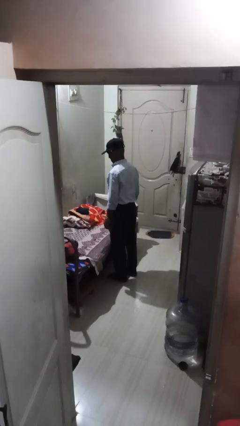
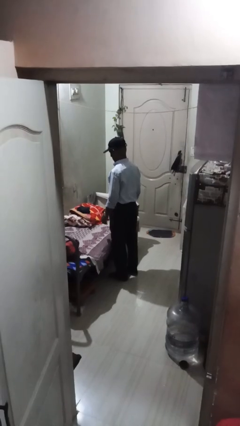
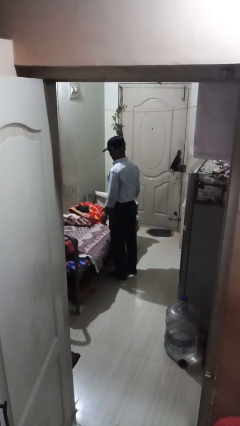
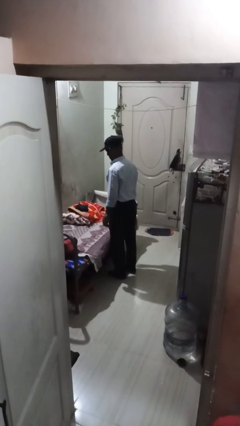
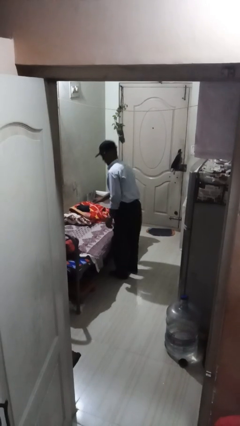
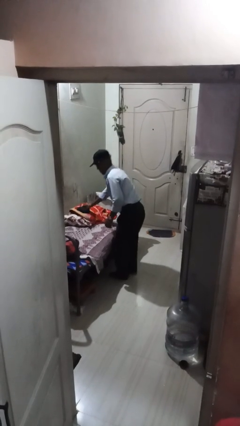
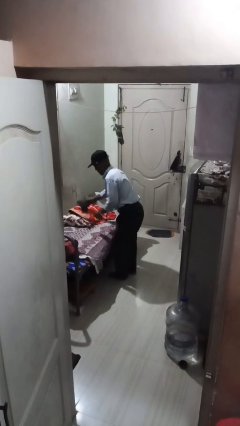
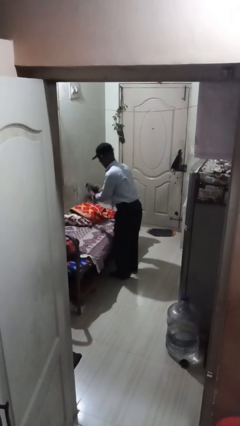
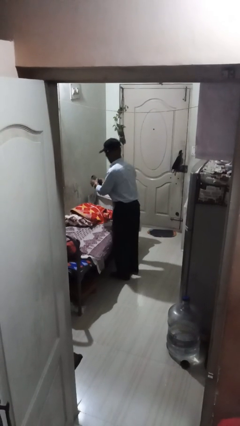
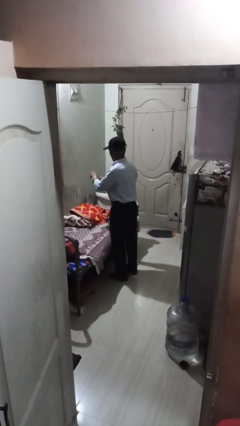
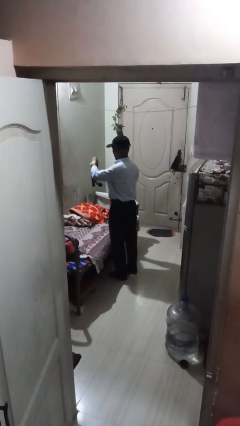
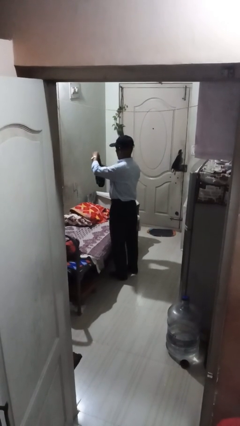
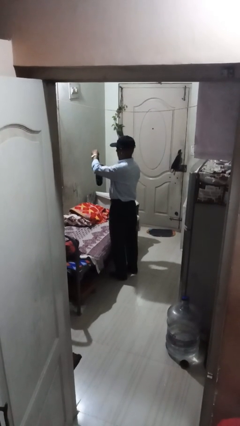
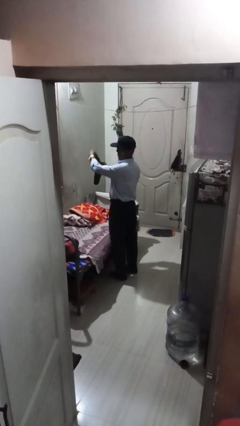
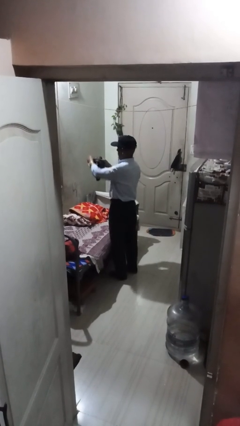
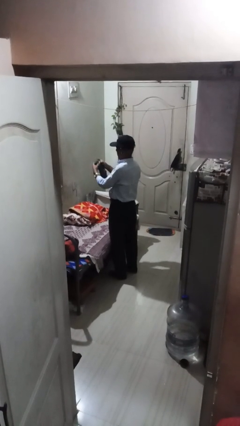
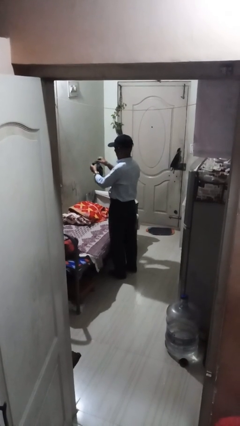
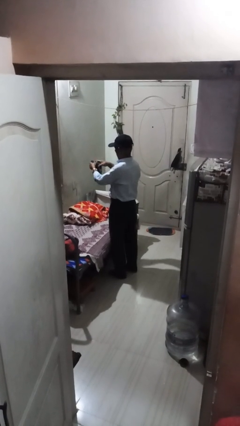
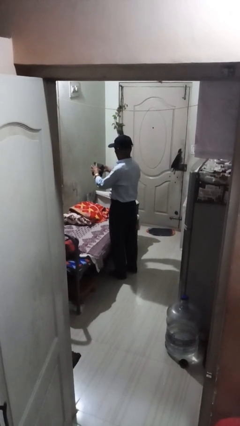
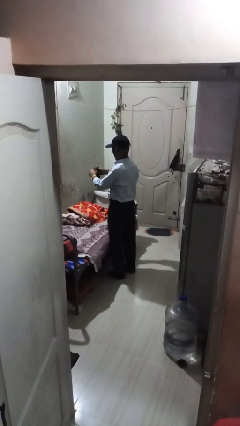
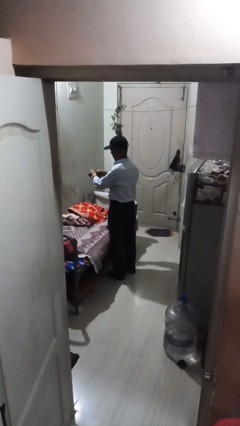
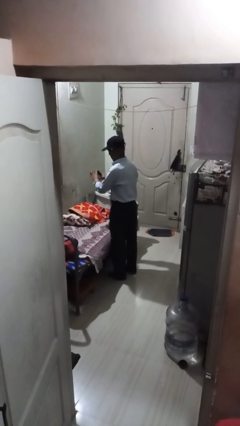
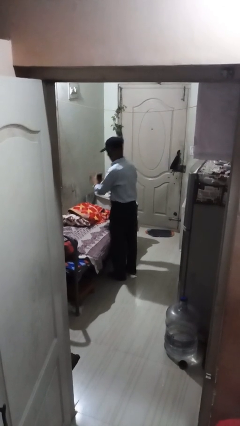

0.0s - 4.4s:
person folds socks

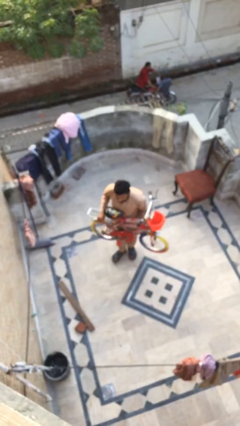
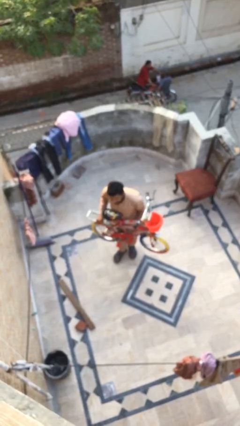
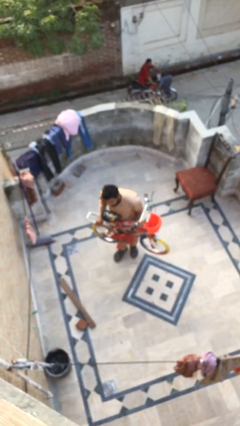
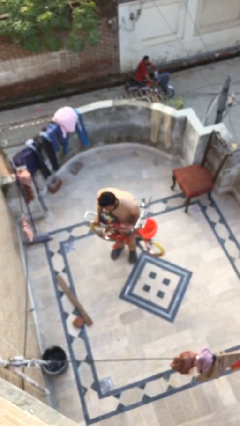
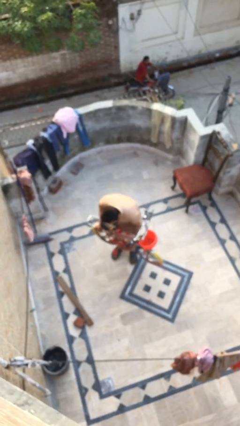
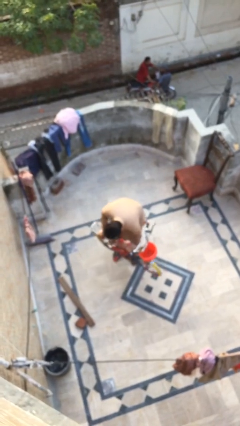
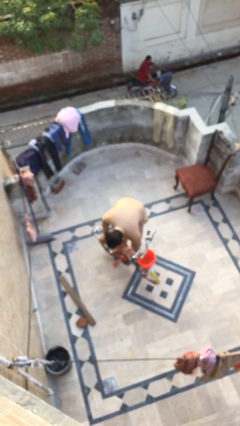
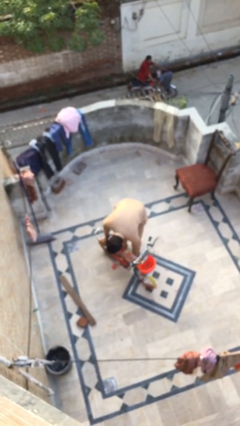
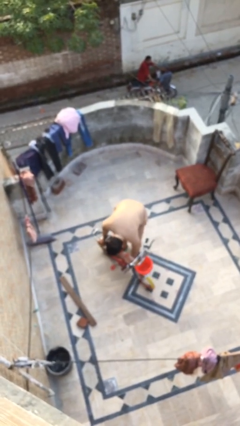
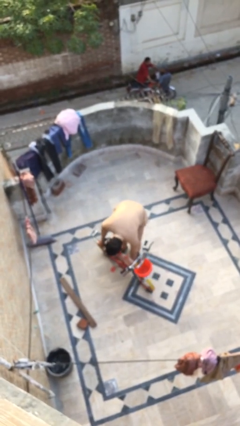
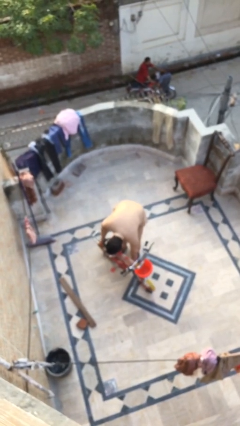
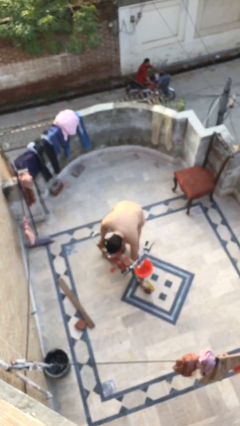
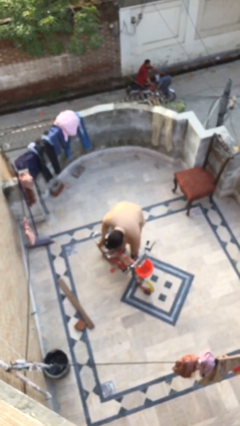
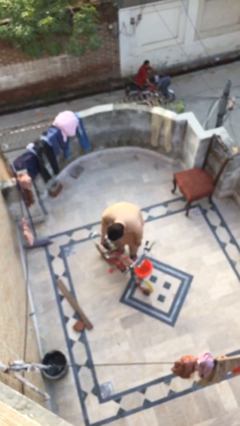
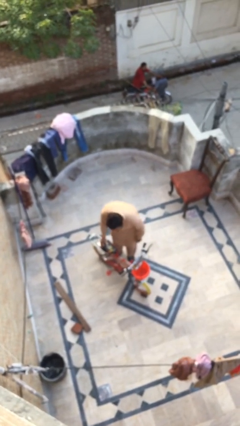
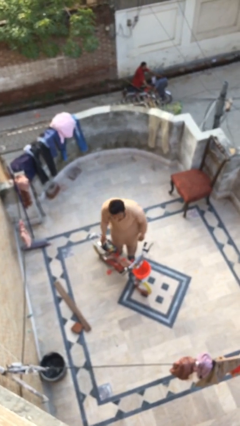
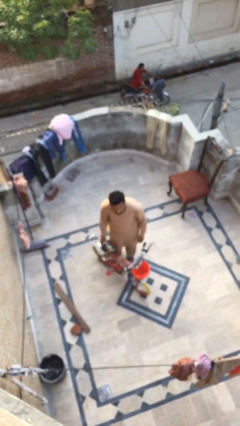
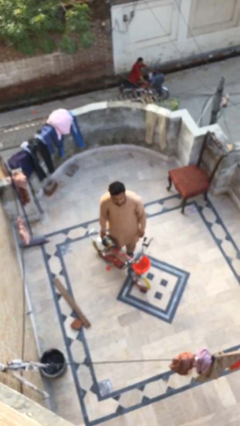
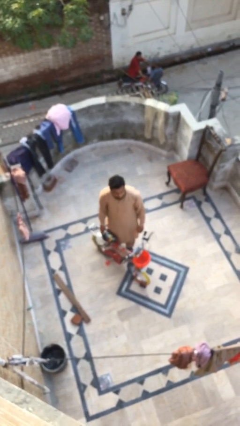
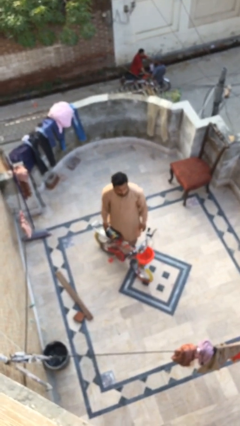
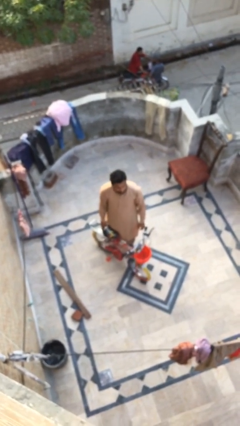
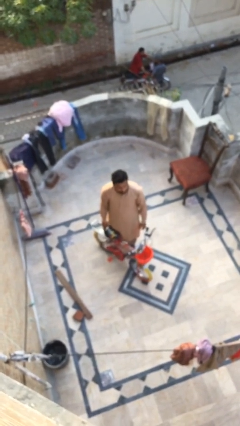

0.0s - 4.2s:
person puts down object on floor

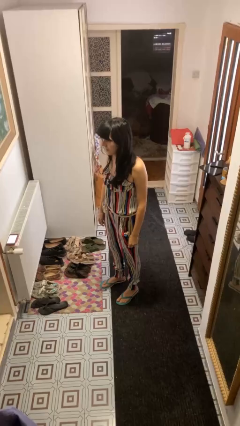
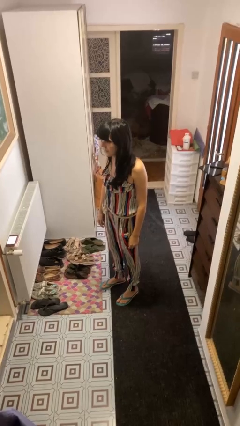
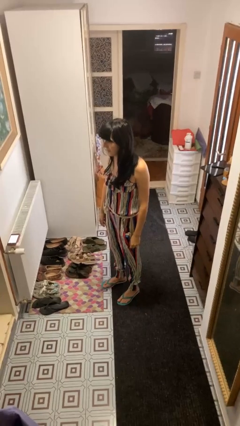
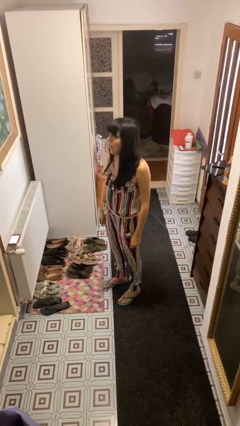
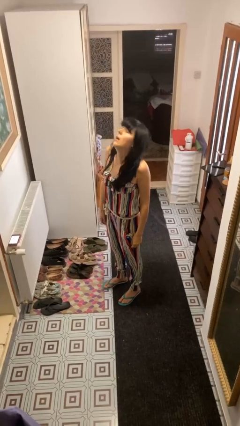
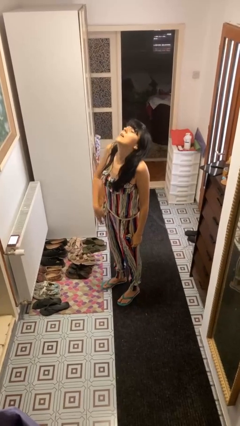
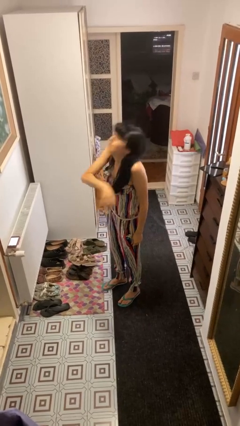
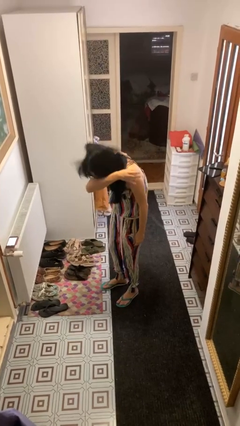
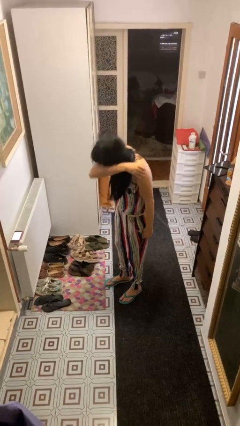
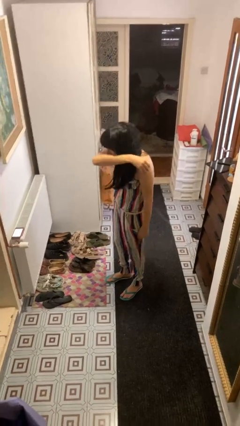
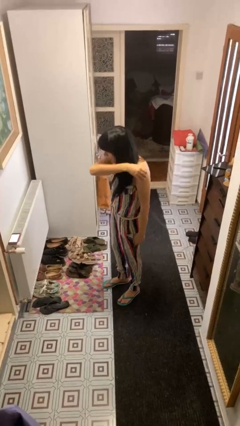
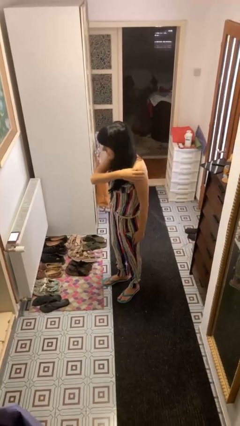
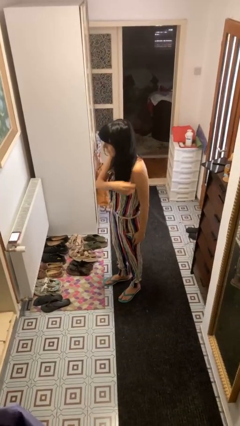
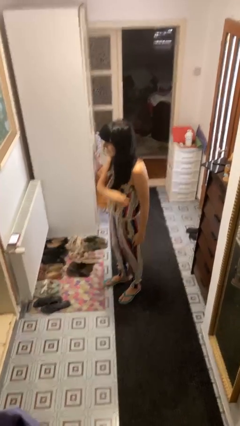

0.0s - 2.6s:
person sneezes into arm

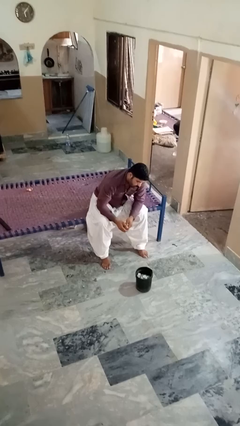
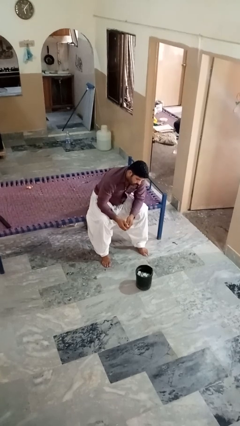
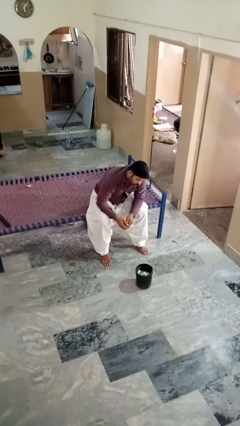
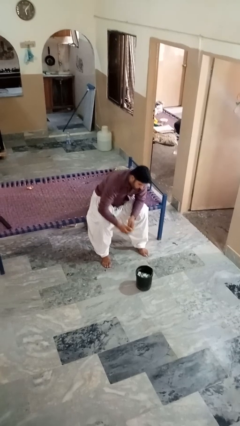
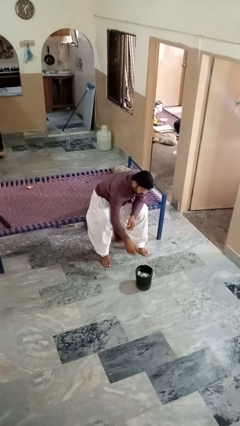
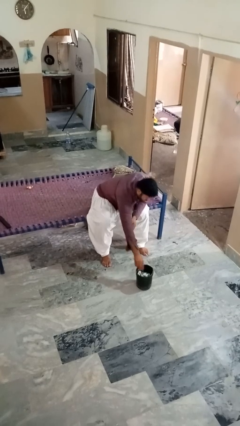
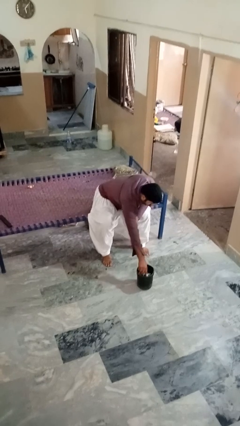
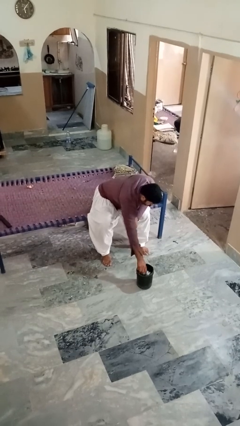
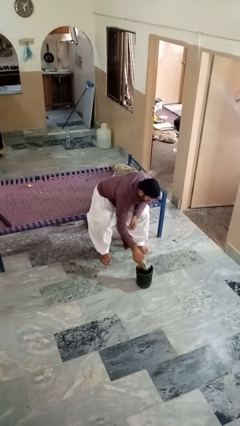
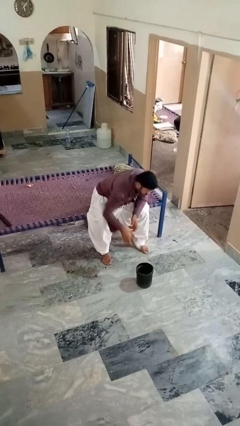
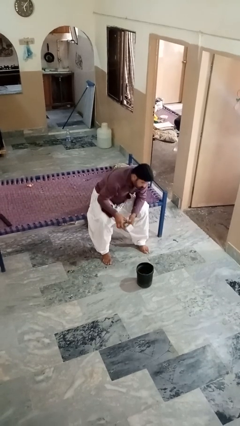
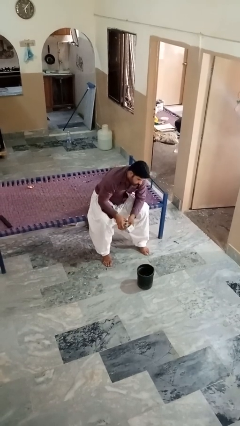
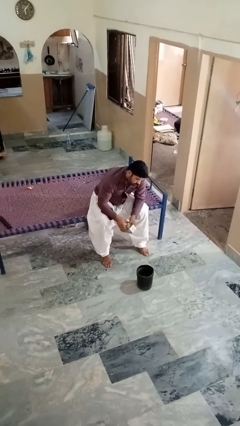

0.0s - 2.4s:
person takes object from basket

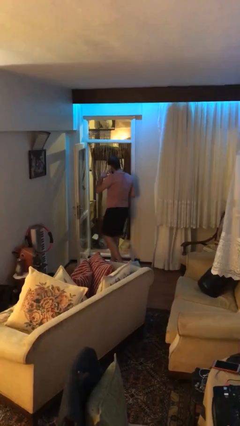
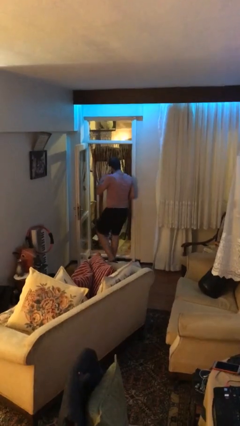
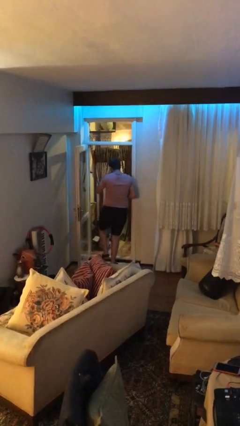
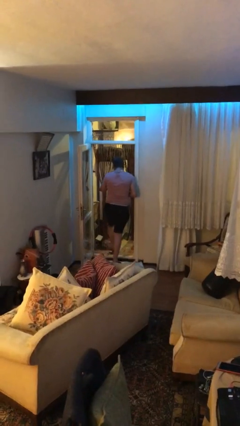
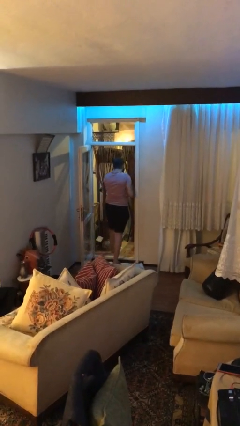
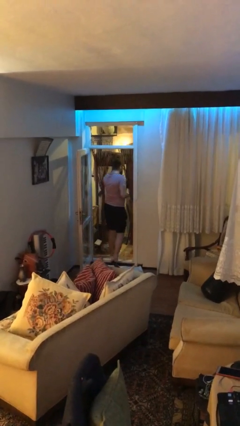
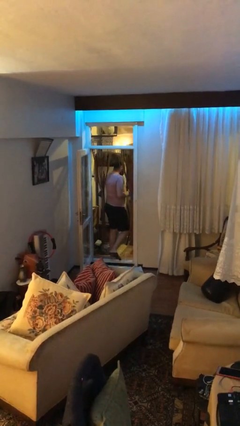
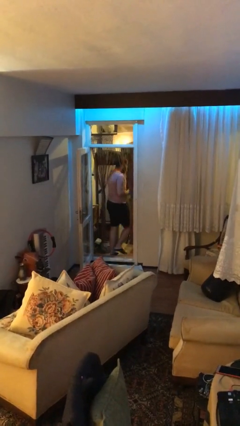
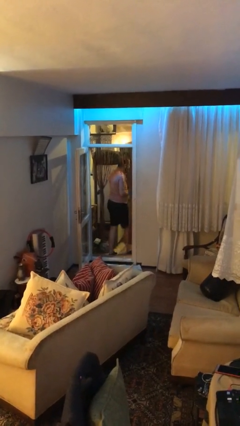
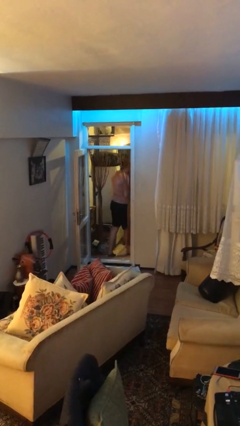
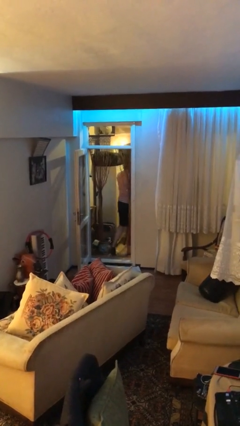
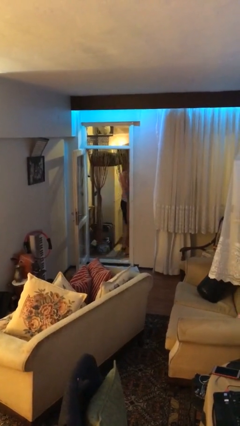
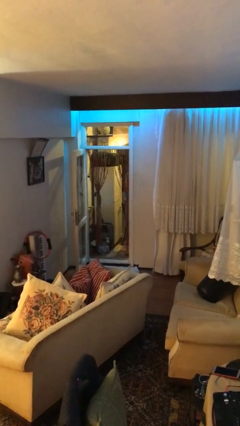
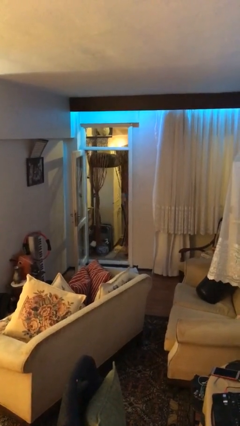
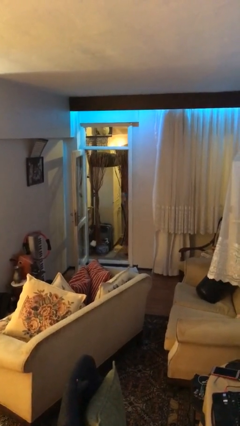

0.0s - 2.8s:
person exits scene through structure

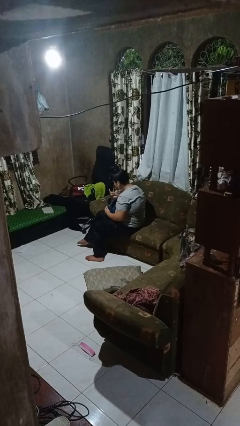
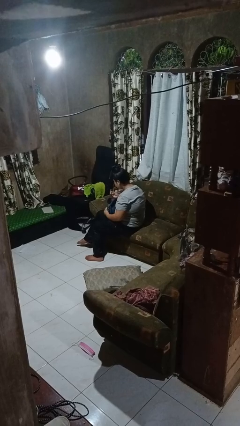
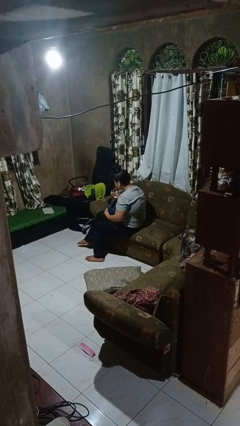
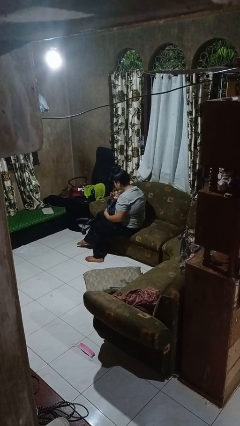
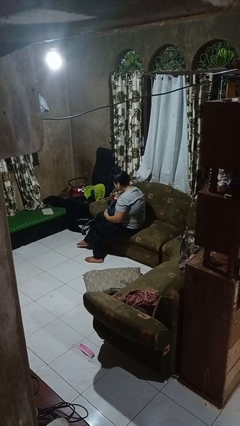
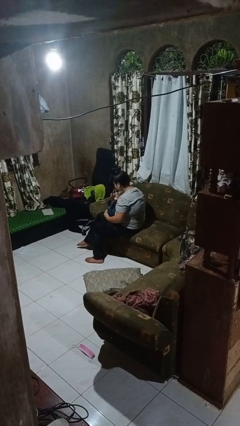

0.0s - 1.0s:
person takes object from purse
